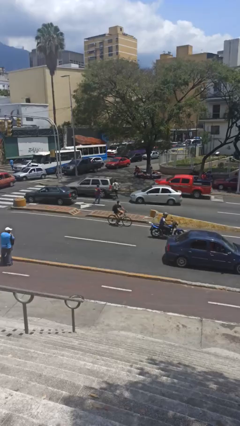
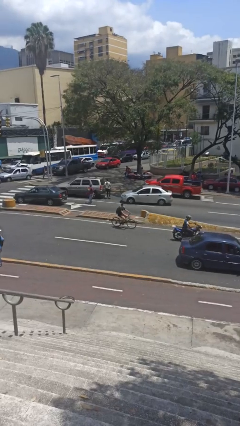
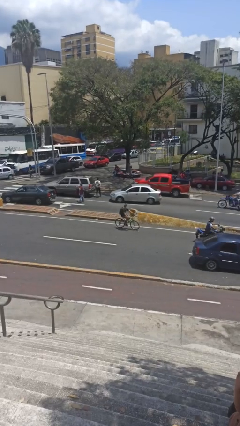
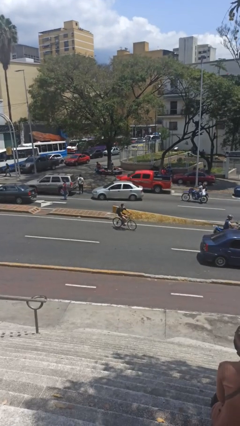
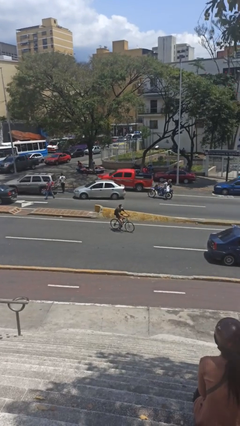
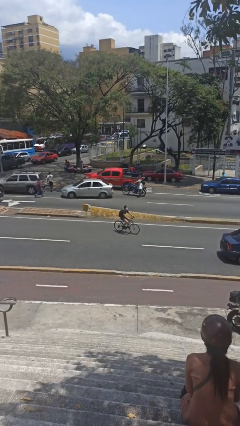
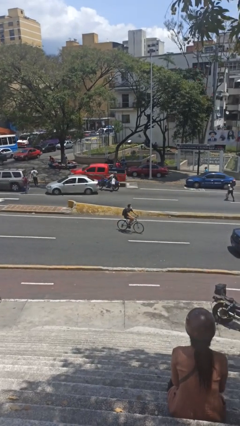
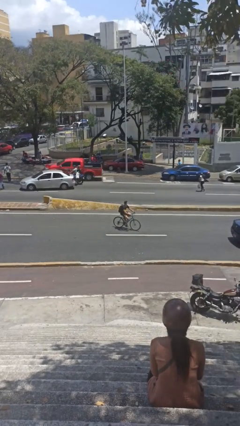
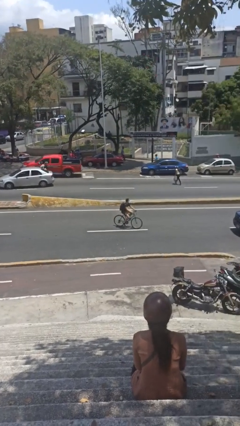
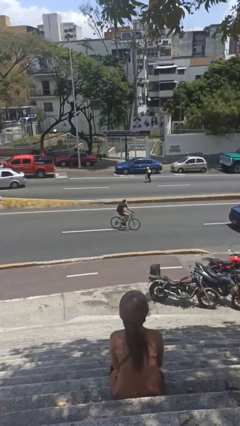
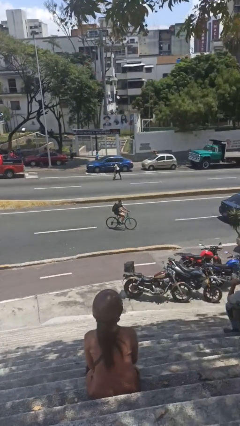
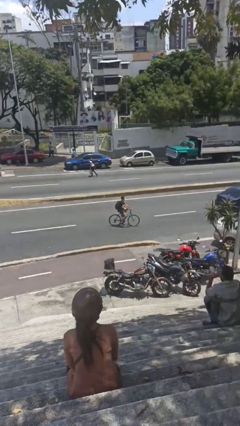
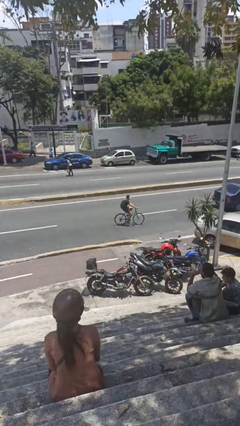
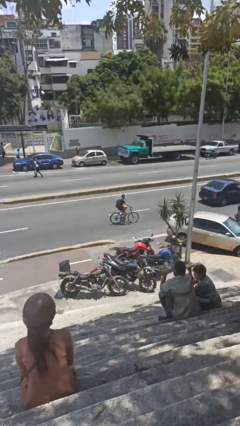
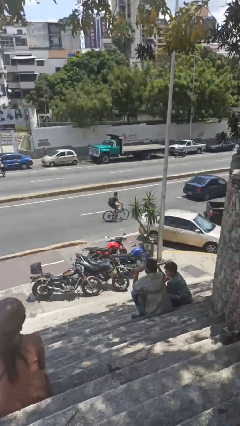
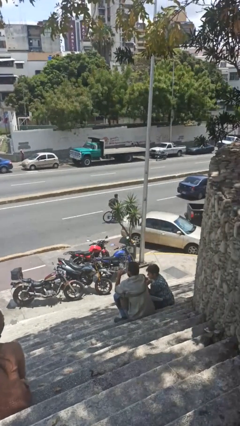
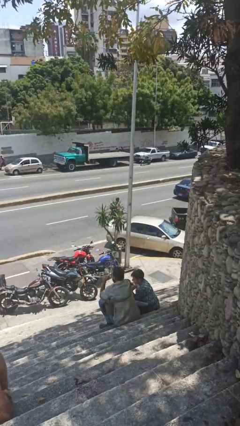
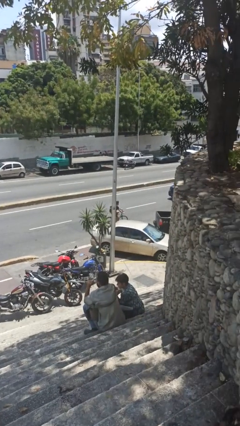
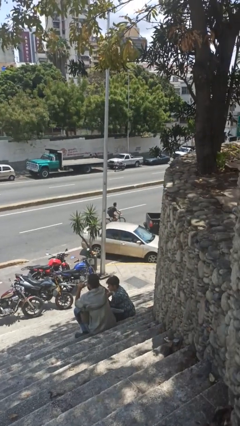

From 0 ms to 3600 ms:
person rides bicycle

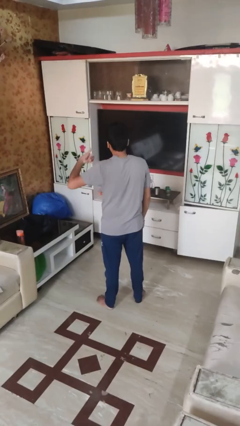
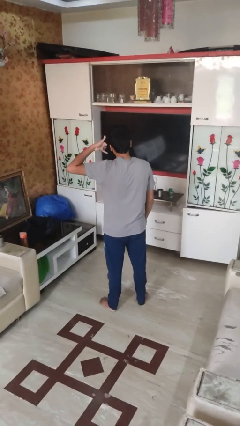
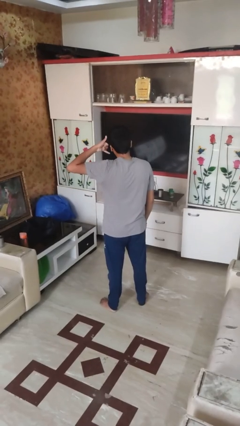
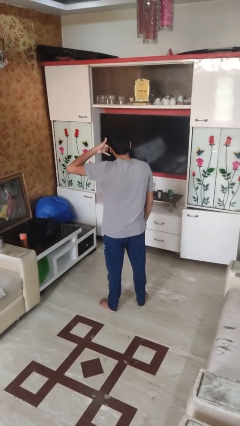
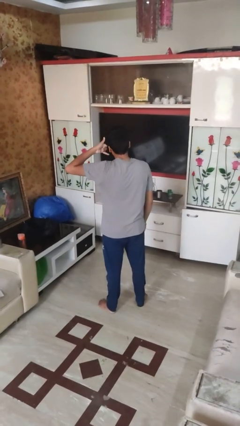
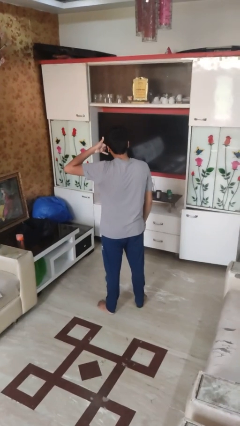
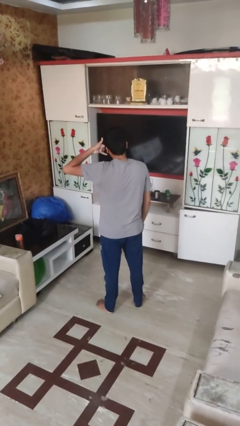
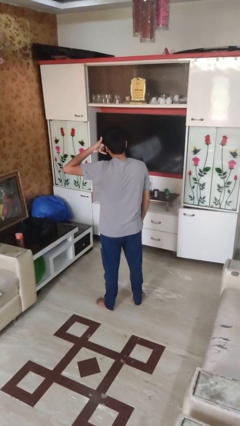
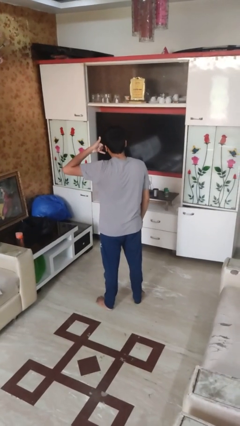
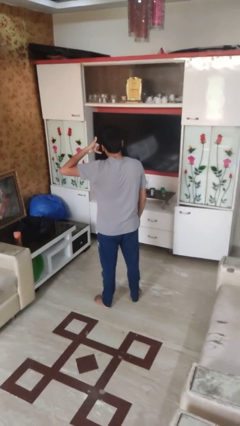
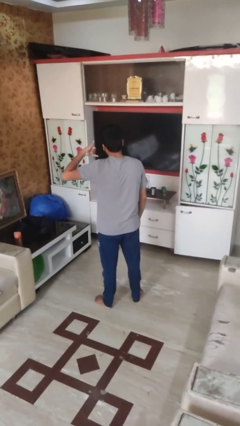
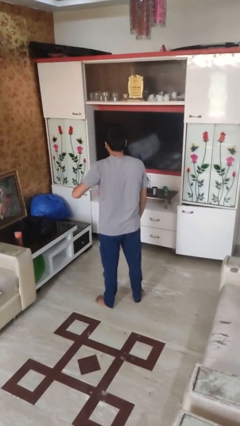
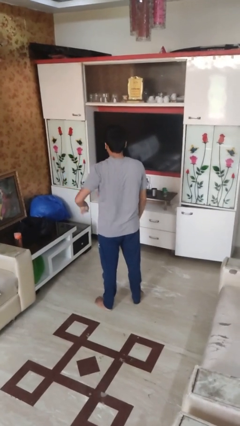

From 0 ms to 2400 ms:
person gestures call me

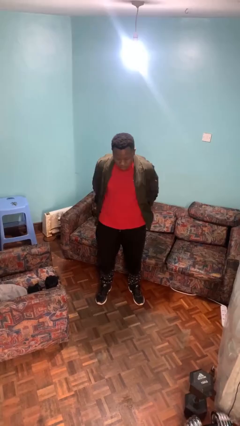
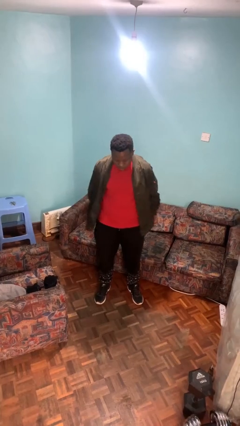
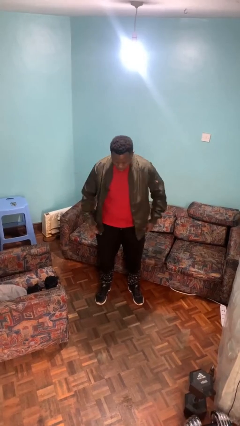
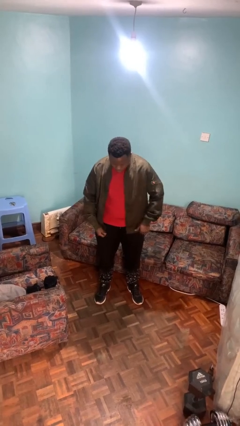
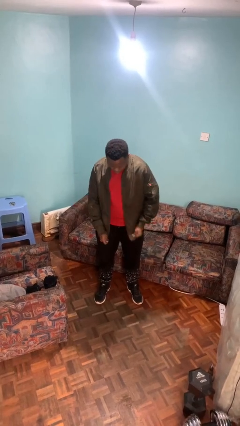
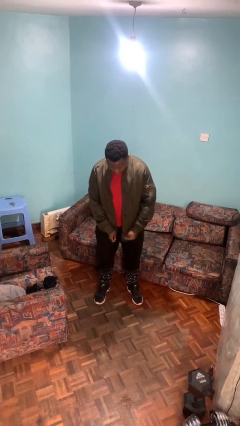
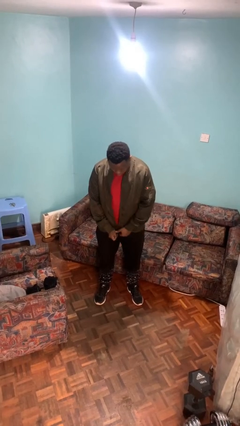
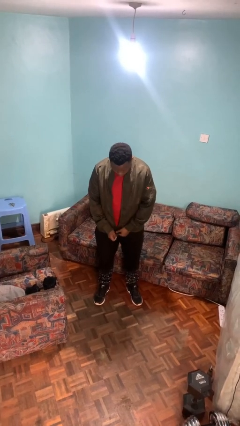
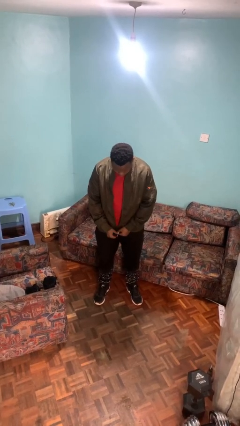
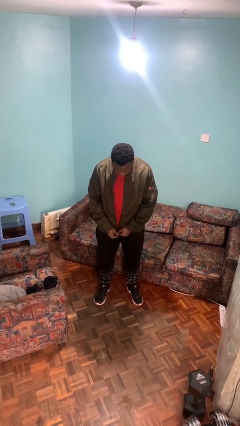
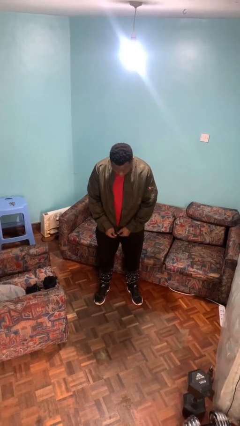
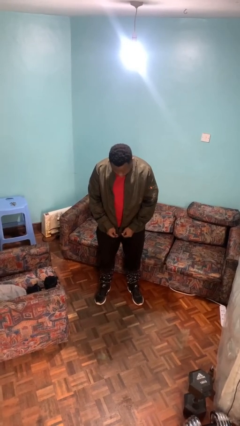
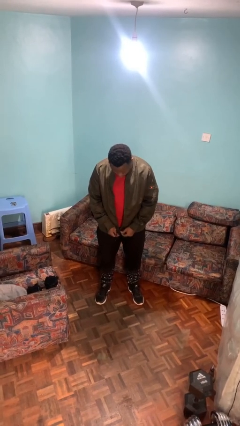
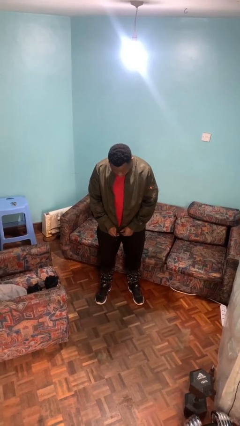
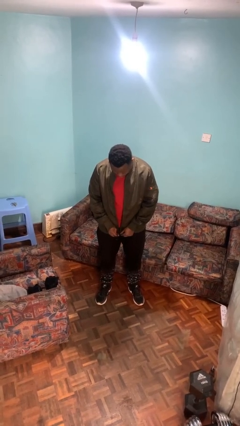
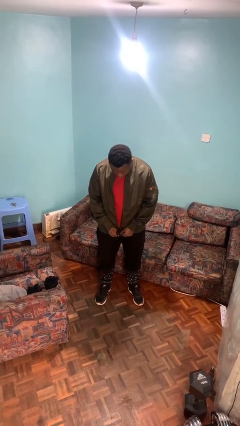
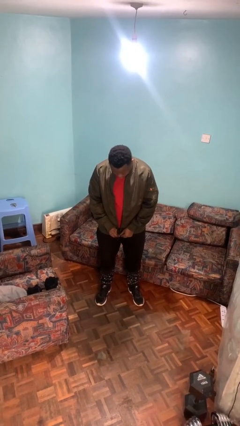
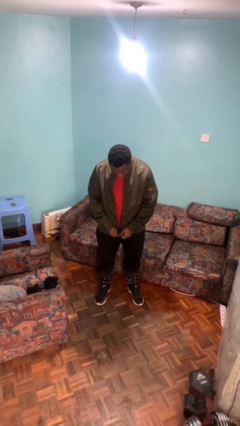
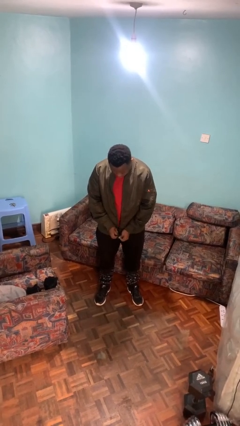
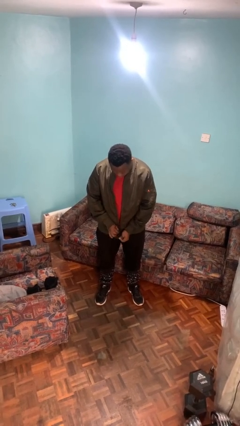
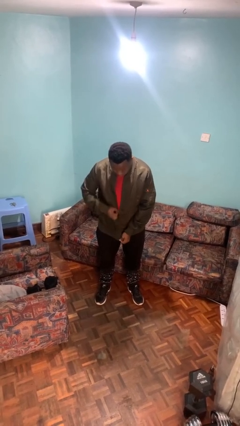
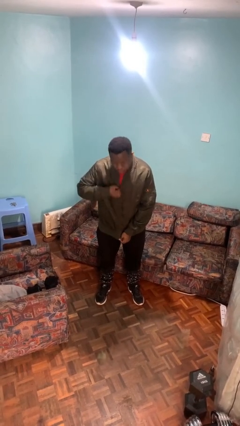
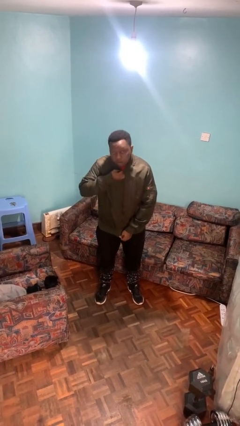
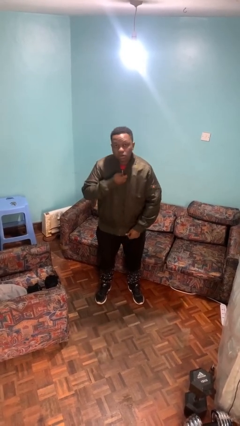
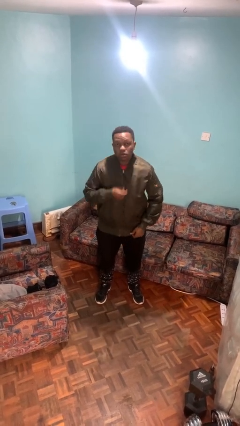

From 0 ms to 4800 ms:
person zips up jacket

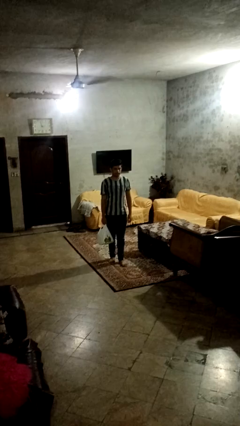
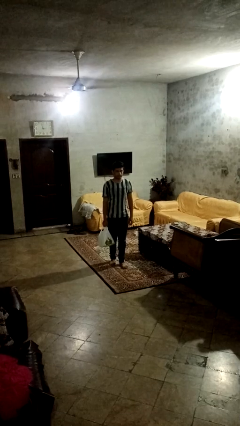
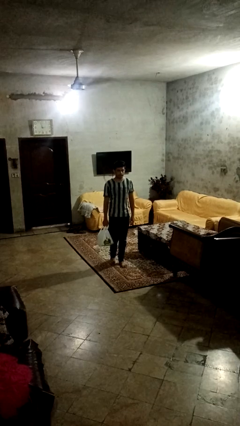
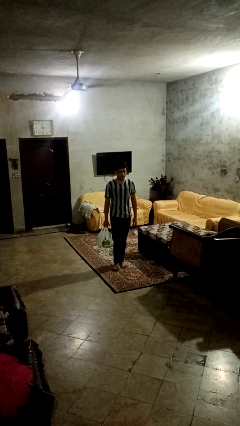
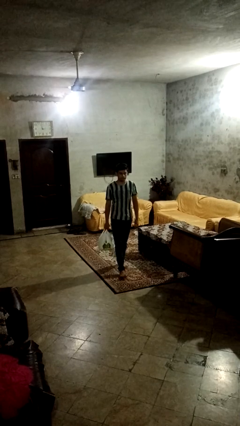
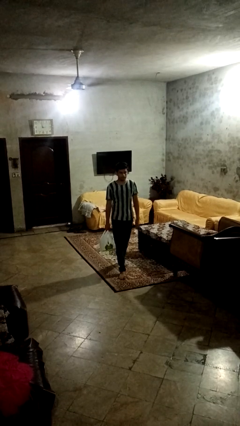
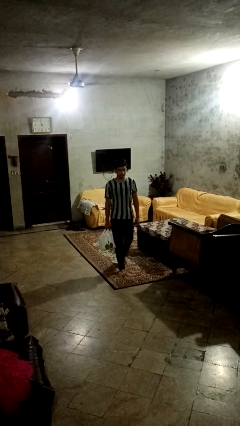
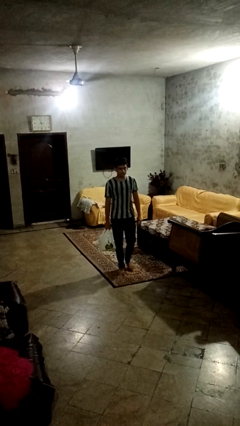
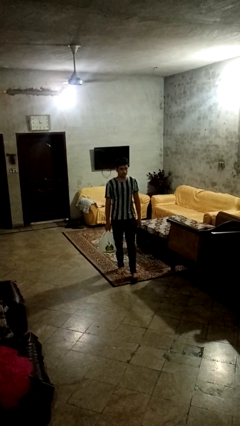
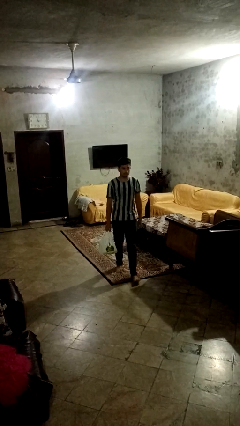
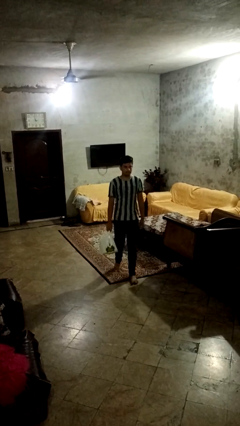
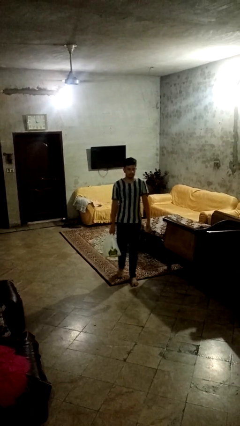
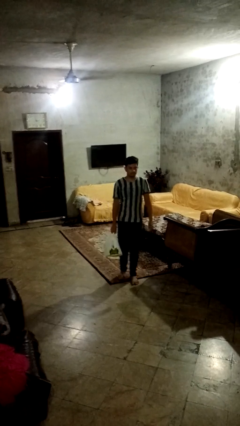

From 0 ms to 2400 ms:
person carries groceries

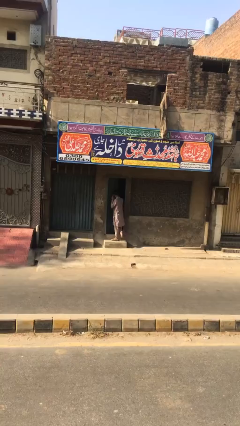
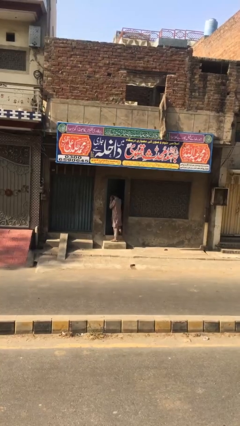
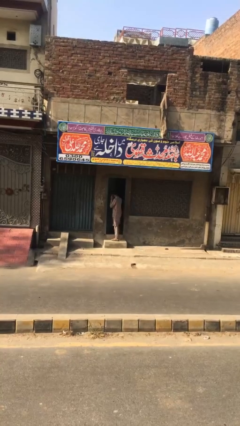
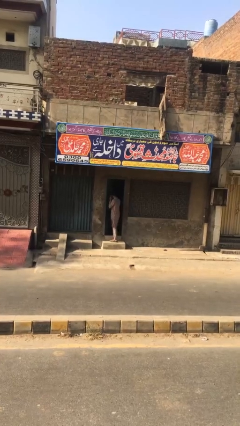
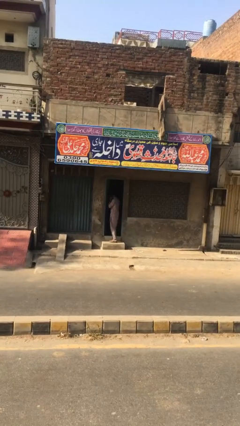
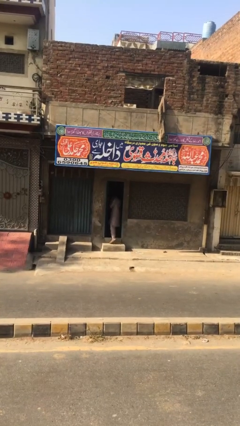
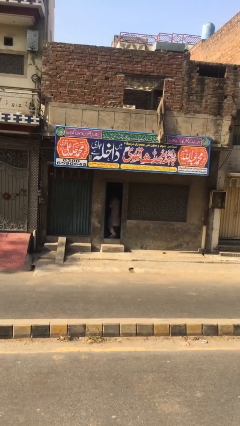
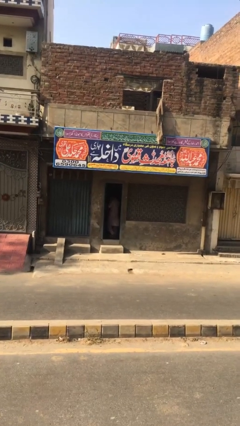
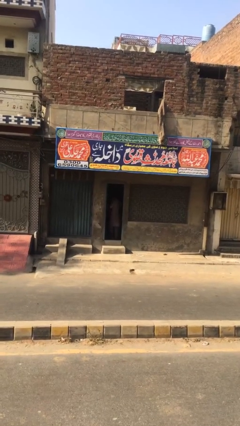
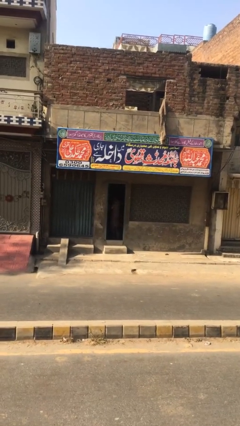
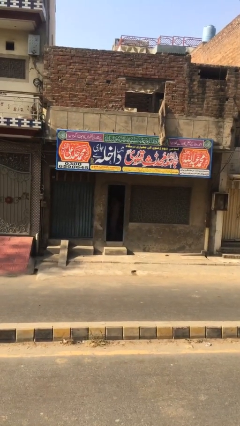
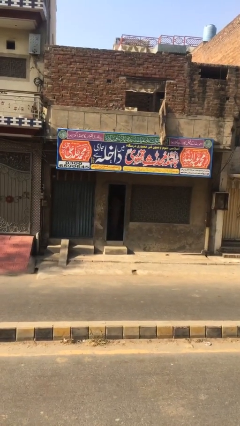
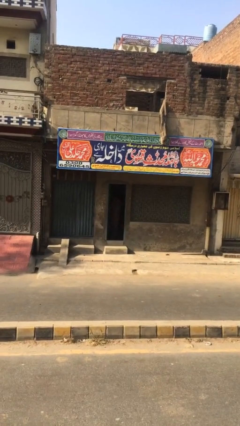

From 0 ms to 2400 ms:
person exits scene through structure

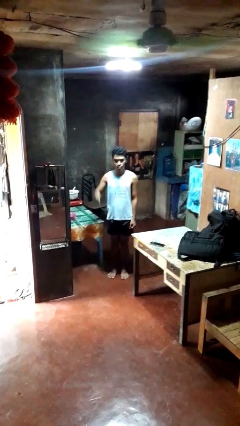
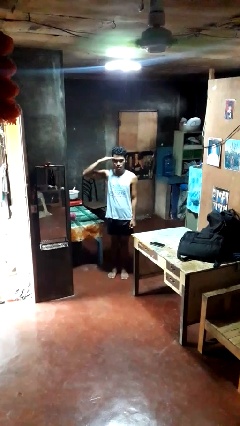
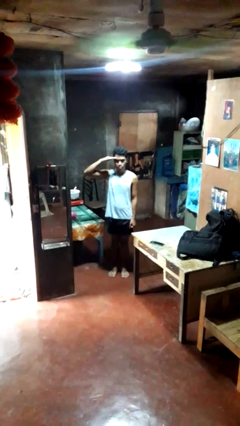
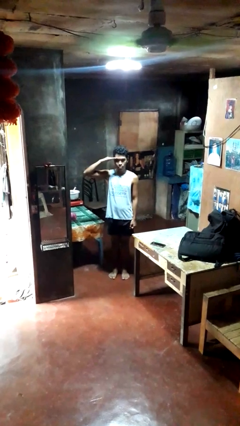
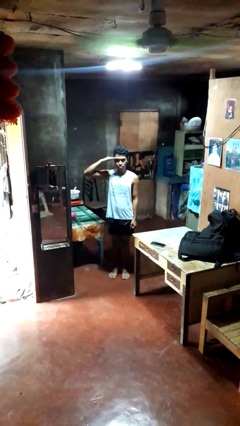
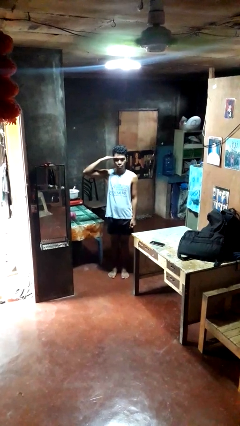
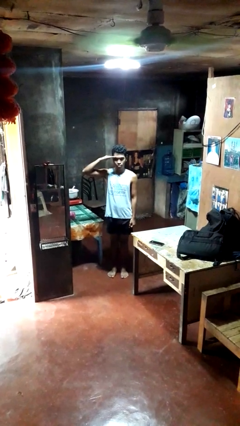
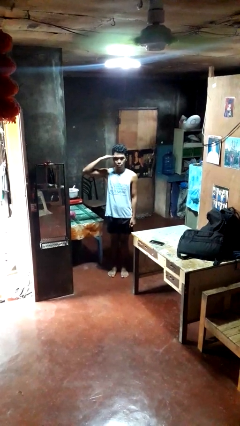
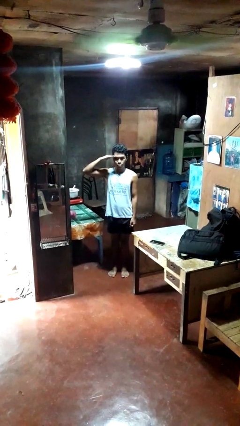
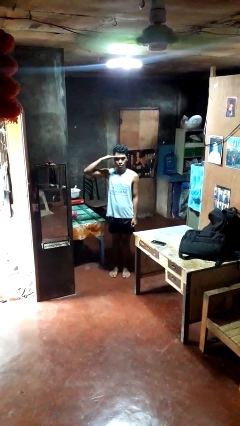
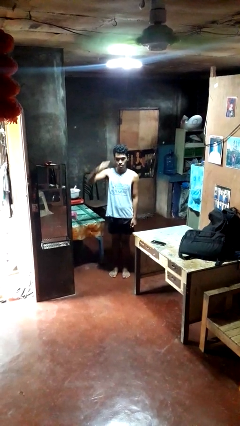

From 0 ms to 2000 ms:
person salutes
